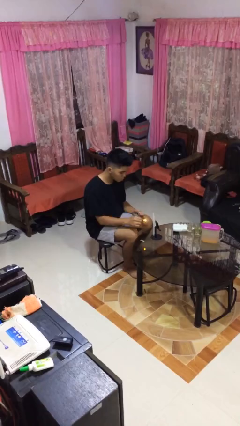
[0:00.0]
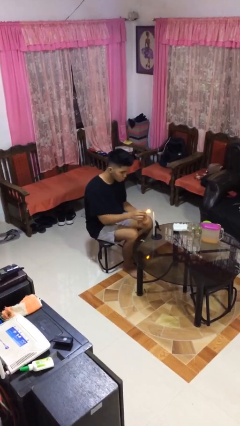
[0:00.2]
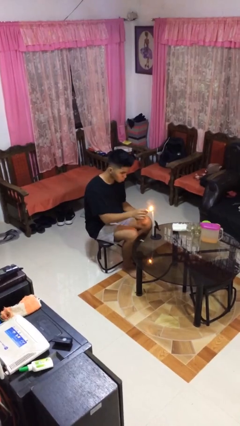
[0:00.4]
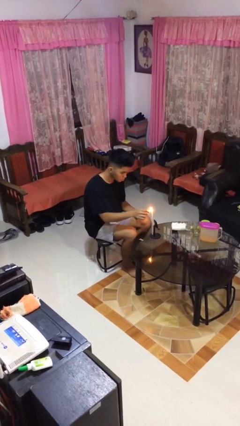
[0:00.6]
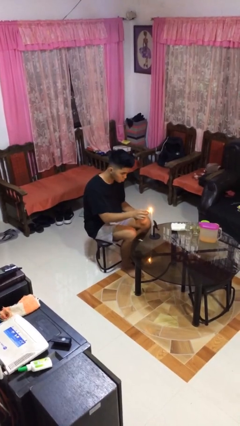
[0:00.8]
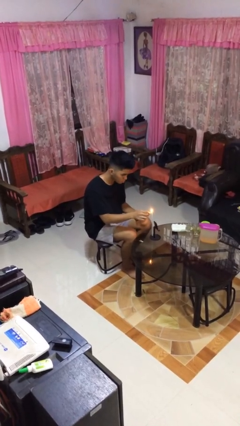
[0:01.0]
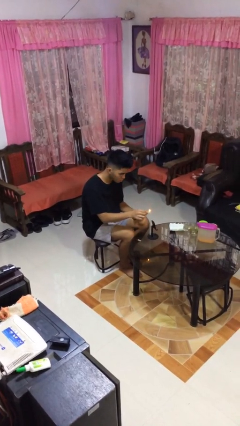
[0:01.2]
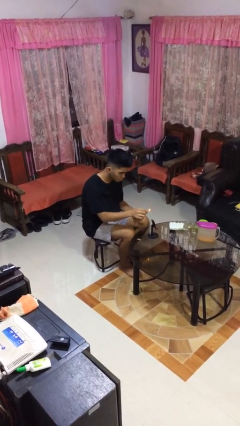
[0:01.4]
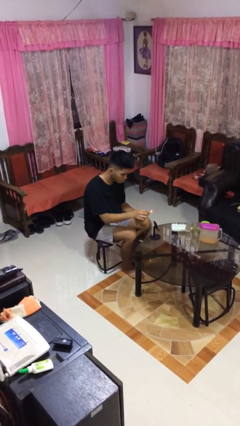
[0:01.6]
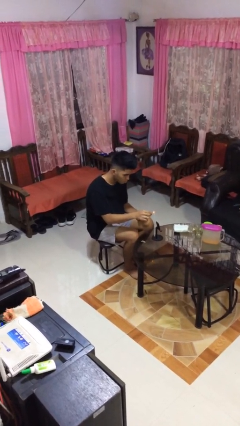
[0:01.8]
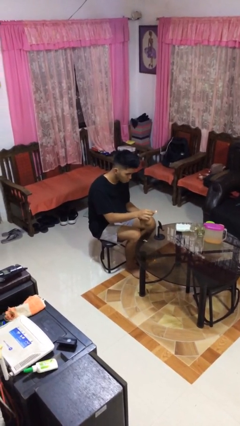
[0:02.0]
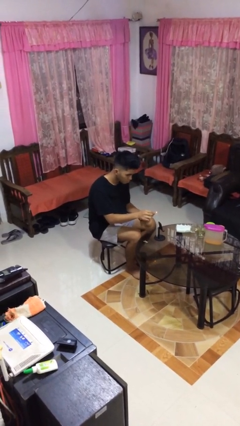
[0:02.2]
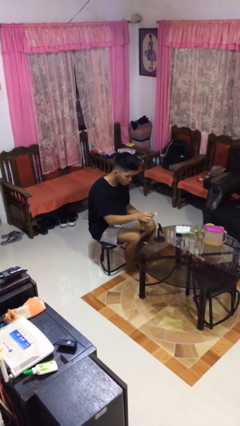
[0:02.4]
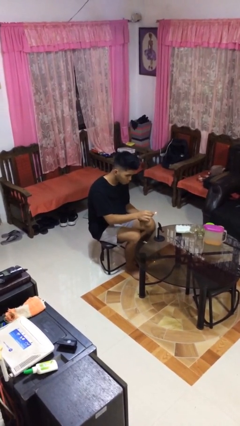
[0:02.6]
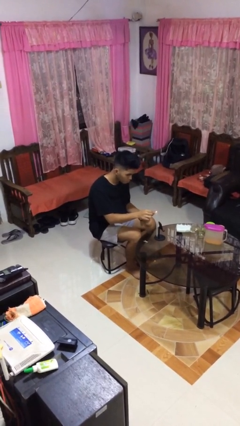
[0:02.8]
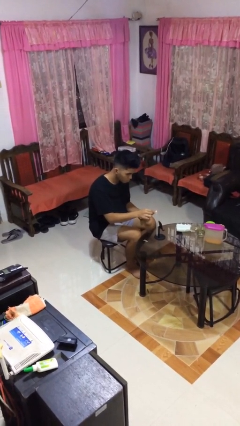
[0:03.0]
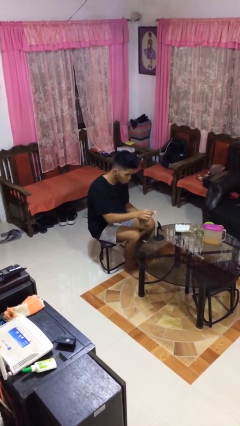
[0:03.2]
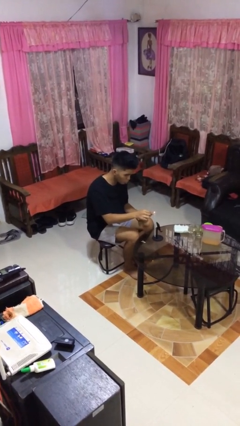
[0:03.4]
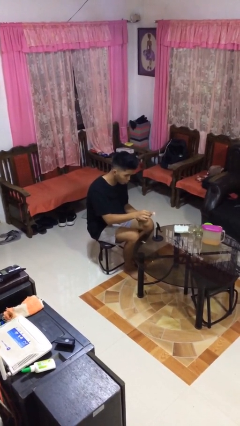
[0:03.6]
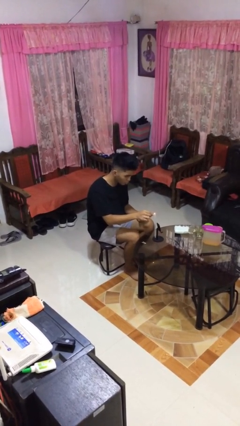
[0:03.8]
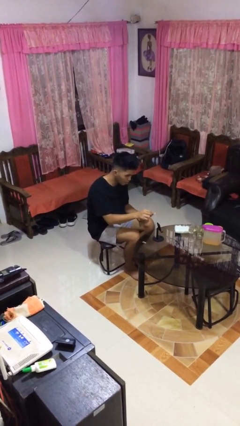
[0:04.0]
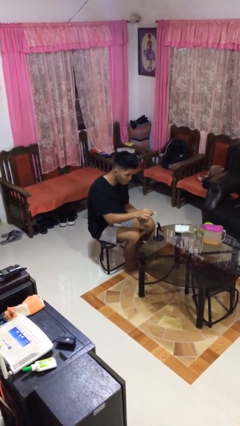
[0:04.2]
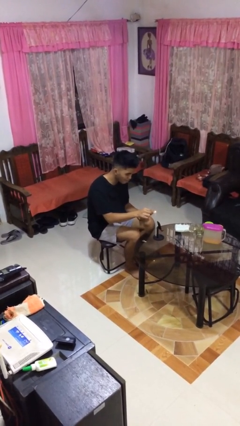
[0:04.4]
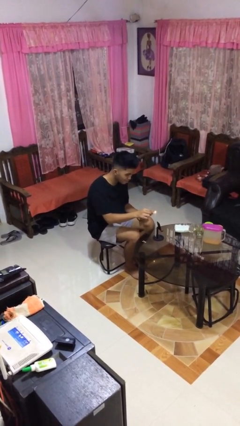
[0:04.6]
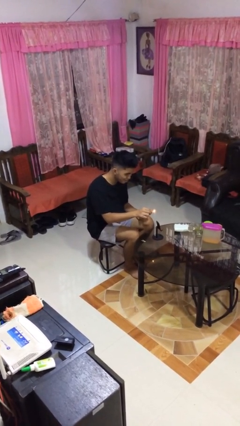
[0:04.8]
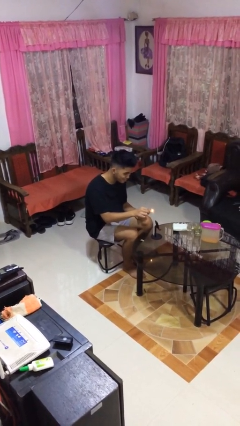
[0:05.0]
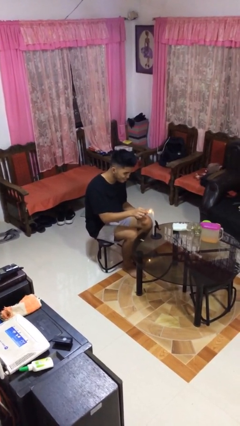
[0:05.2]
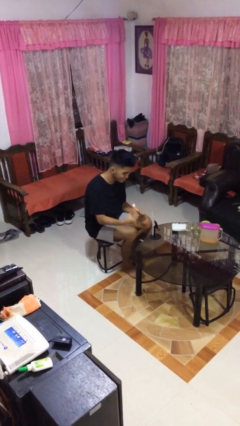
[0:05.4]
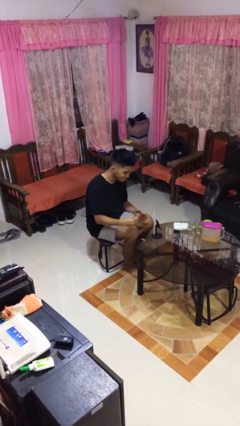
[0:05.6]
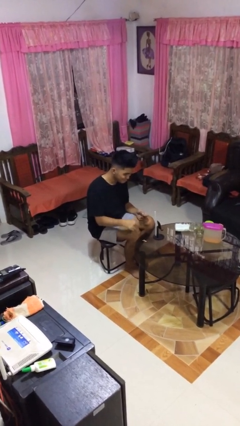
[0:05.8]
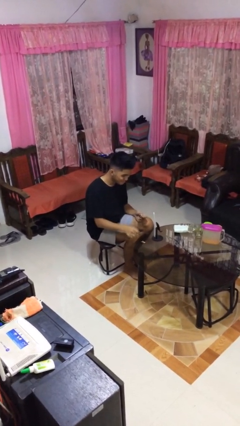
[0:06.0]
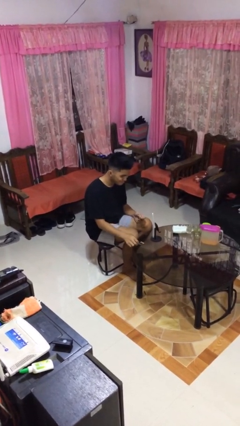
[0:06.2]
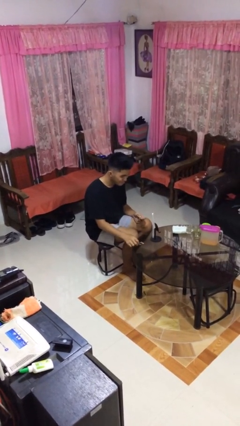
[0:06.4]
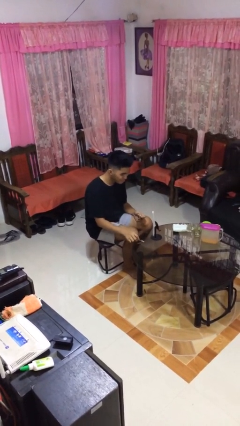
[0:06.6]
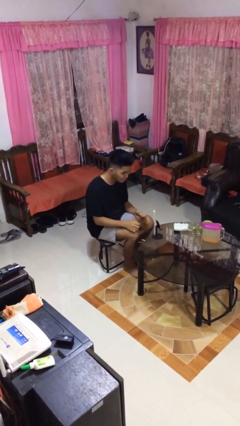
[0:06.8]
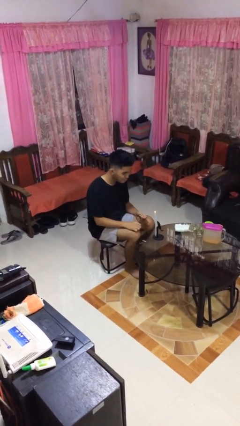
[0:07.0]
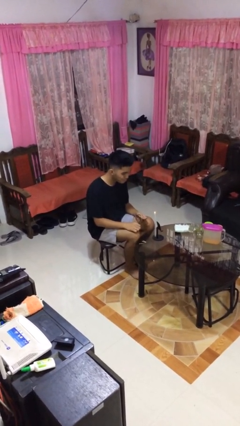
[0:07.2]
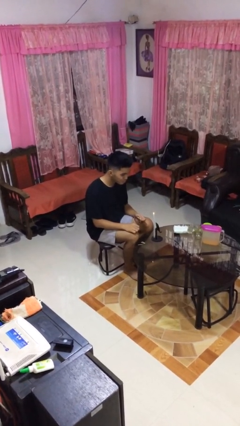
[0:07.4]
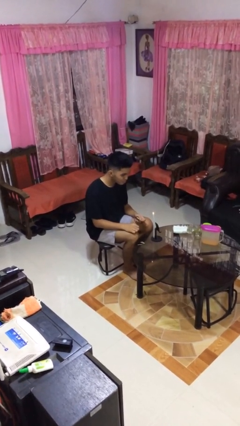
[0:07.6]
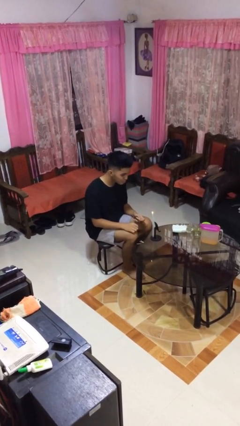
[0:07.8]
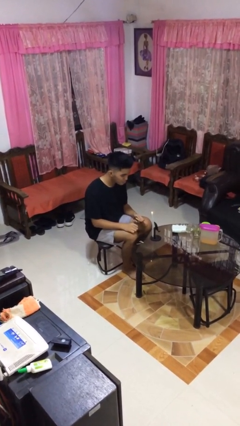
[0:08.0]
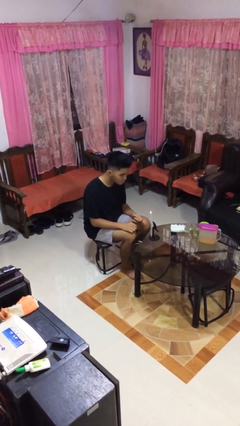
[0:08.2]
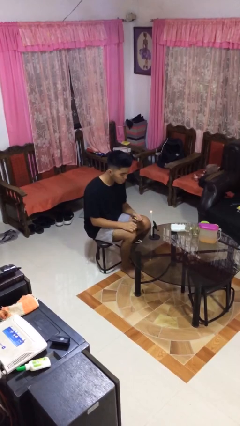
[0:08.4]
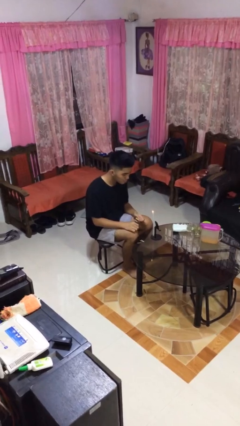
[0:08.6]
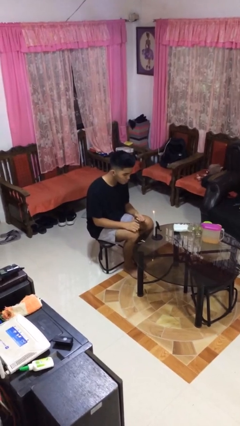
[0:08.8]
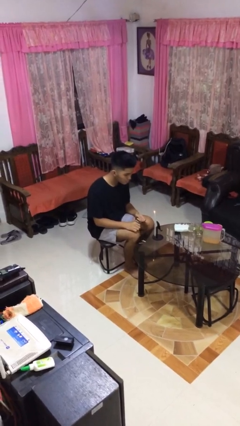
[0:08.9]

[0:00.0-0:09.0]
person lights candle

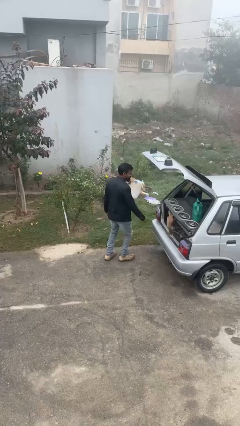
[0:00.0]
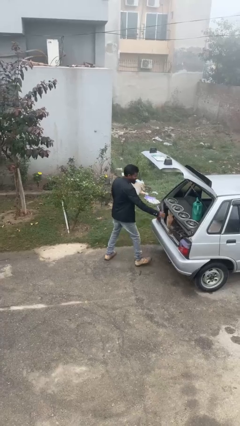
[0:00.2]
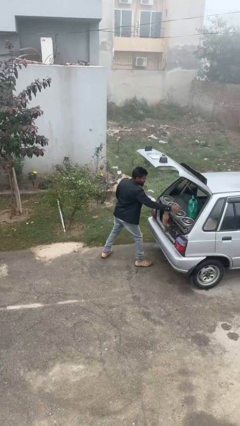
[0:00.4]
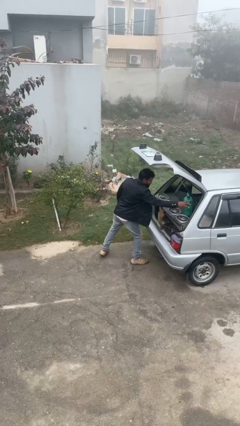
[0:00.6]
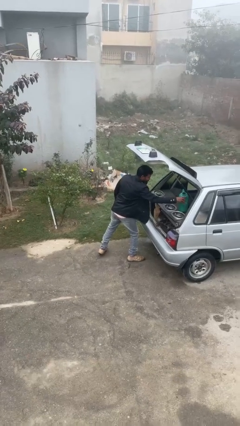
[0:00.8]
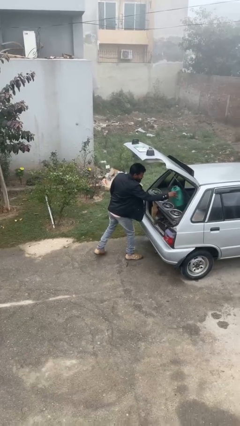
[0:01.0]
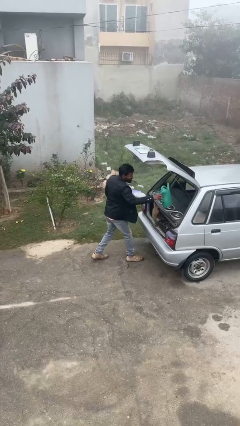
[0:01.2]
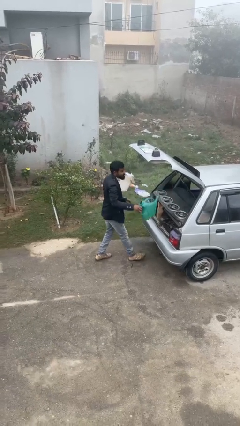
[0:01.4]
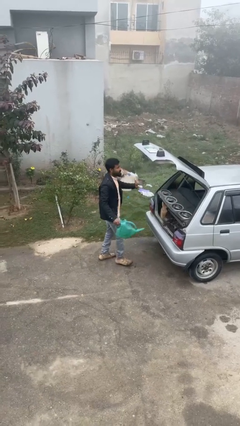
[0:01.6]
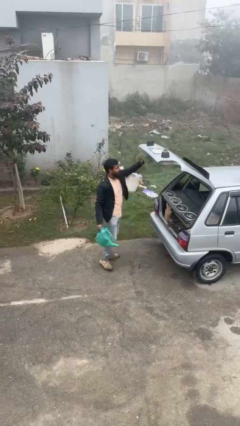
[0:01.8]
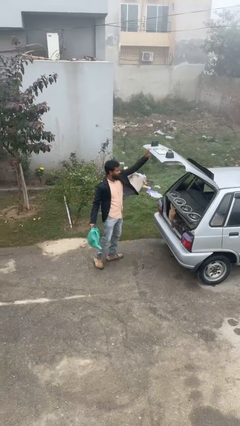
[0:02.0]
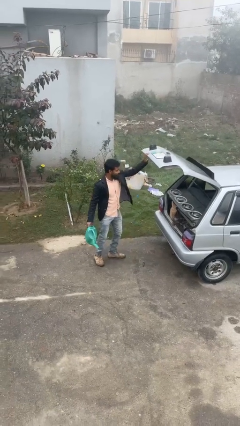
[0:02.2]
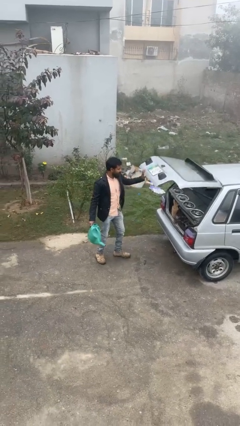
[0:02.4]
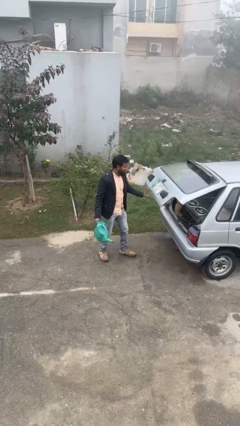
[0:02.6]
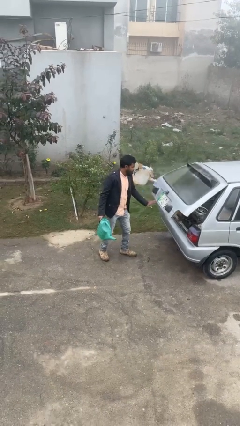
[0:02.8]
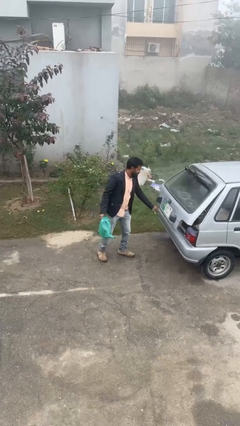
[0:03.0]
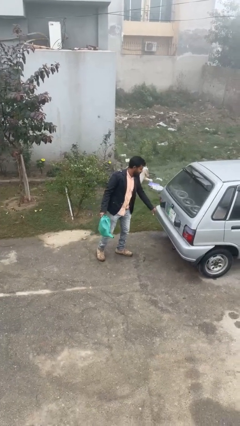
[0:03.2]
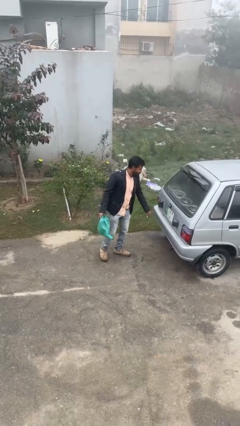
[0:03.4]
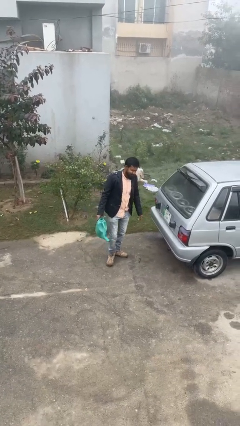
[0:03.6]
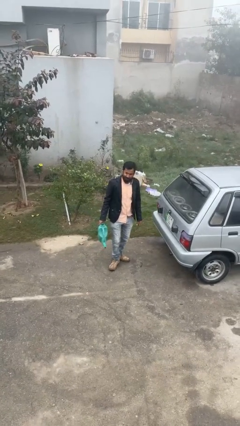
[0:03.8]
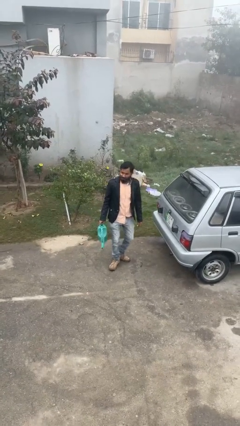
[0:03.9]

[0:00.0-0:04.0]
person unloads car

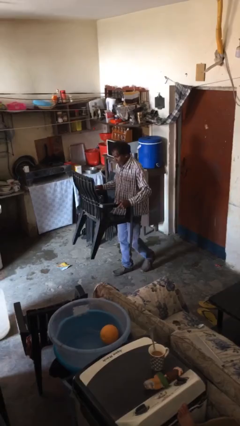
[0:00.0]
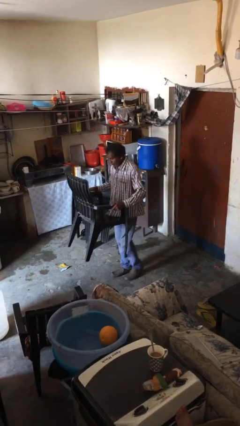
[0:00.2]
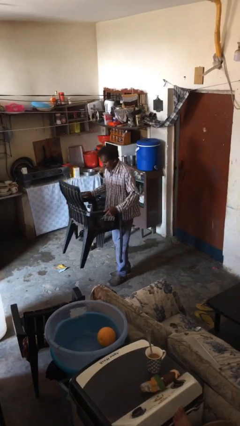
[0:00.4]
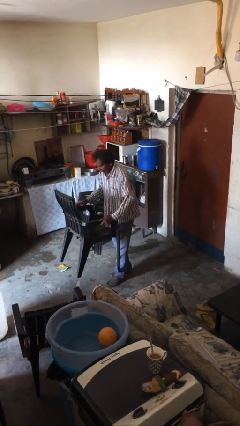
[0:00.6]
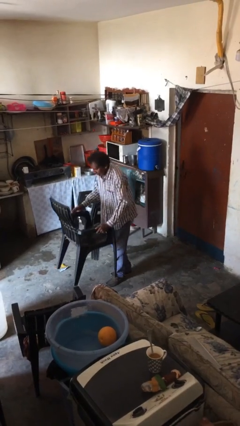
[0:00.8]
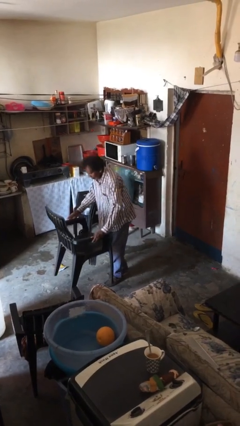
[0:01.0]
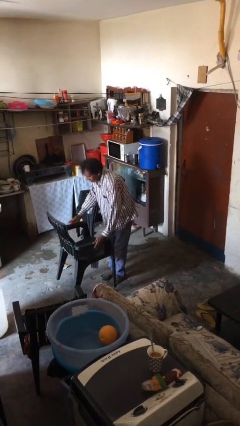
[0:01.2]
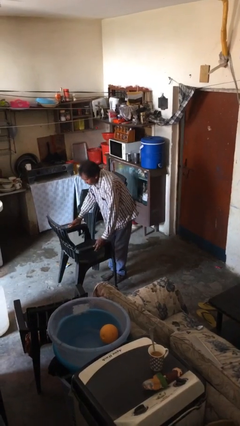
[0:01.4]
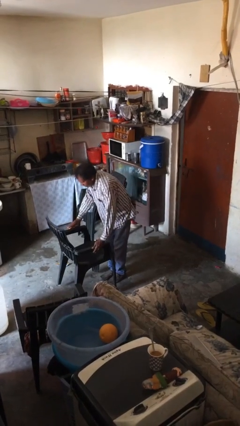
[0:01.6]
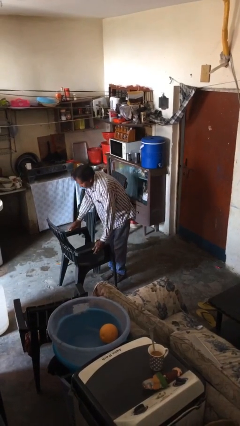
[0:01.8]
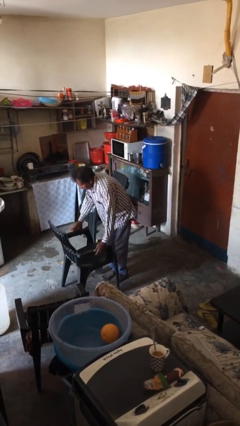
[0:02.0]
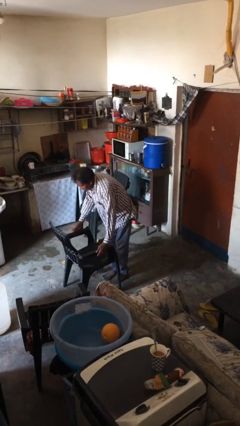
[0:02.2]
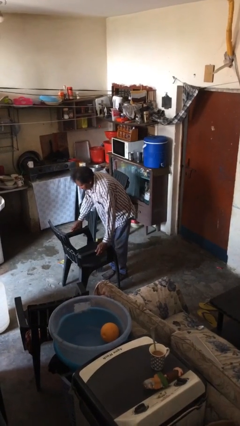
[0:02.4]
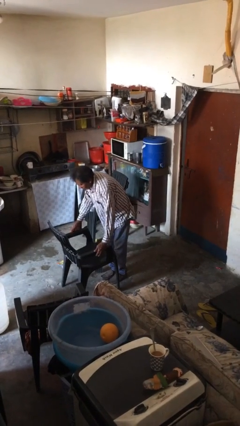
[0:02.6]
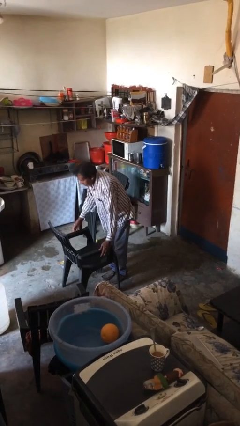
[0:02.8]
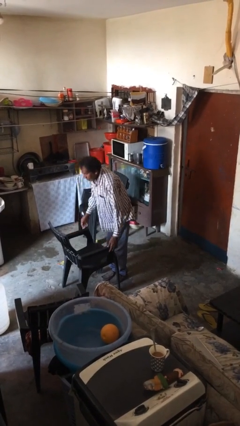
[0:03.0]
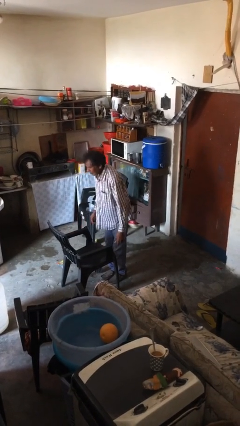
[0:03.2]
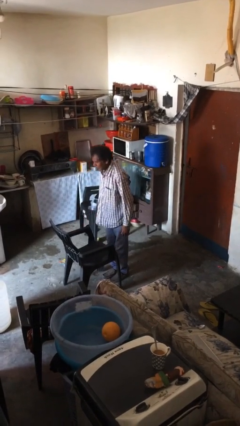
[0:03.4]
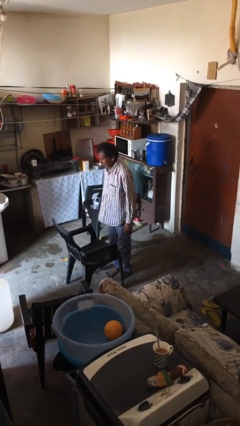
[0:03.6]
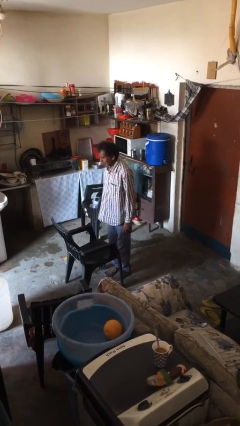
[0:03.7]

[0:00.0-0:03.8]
person puts down object on floor

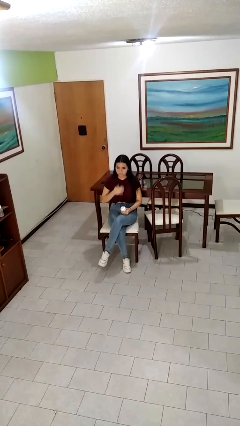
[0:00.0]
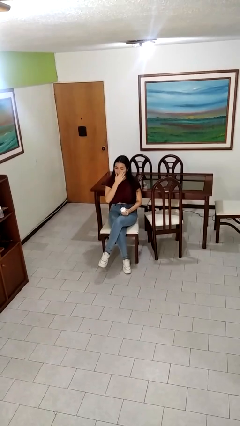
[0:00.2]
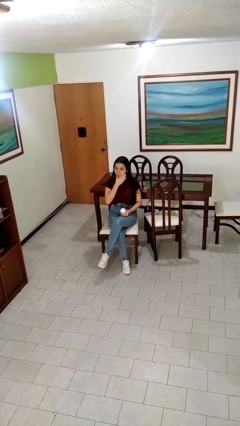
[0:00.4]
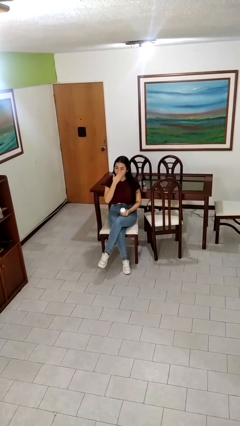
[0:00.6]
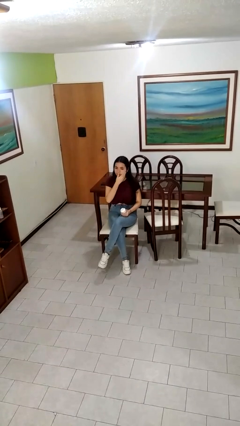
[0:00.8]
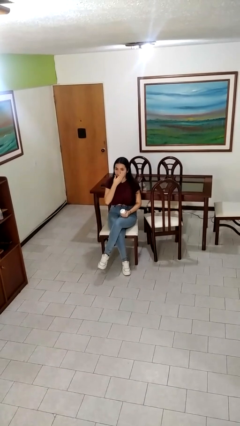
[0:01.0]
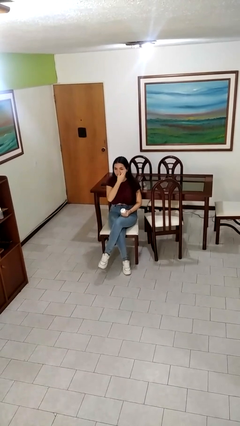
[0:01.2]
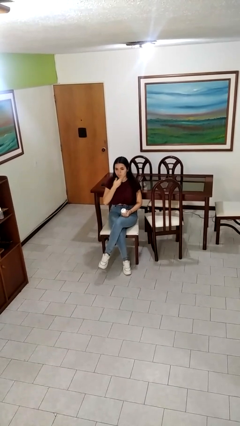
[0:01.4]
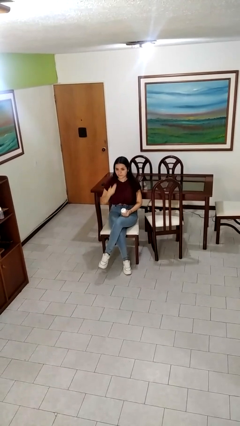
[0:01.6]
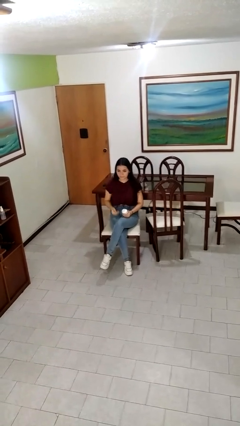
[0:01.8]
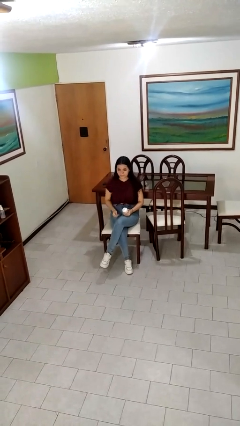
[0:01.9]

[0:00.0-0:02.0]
person applies facial moisturizer
